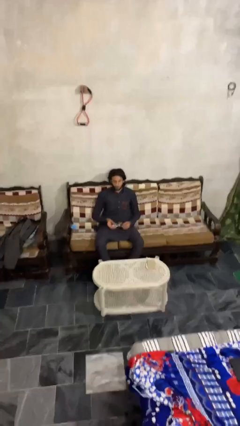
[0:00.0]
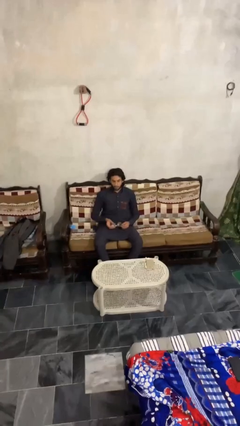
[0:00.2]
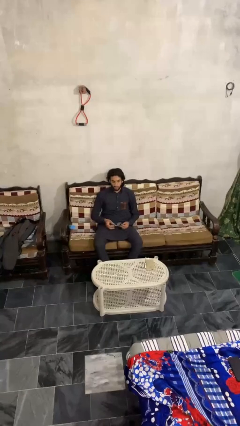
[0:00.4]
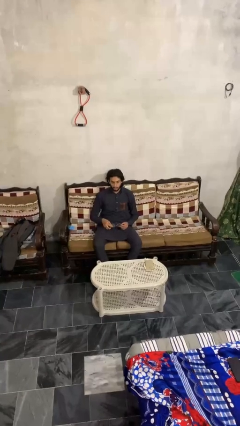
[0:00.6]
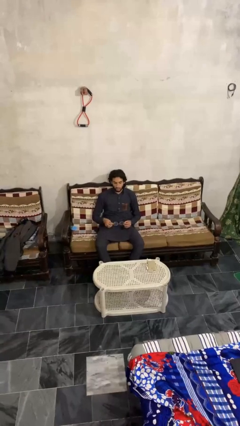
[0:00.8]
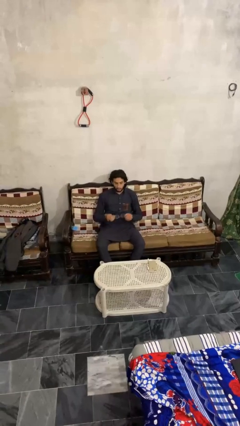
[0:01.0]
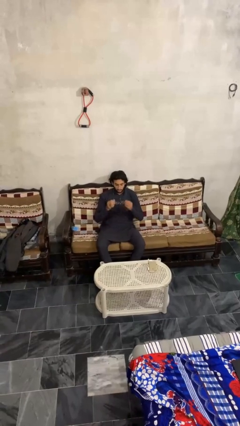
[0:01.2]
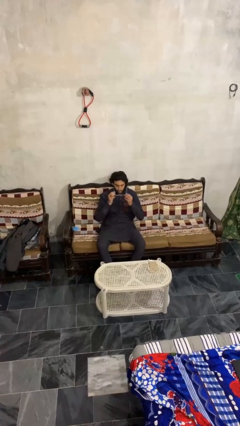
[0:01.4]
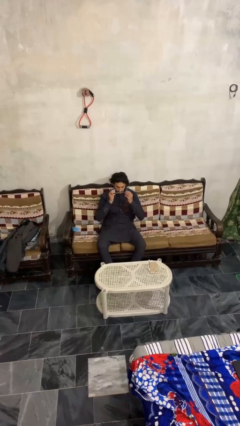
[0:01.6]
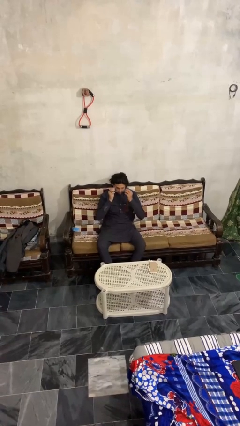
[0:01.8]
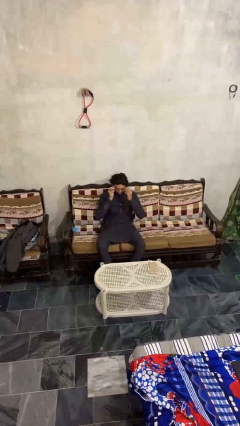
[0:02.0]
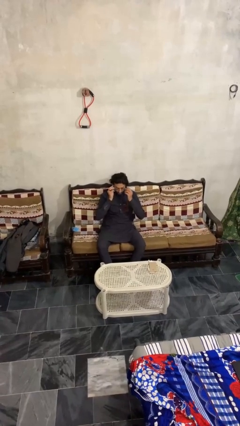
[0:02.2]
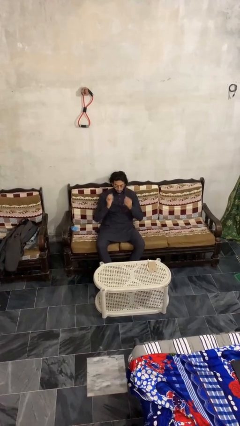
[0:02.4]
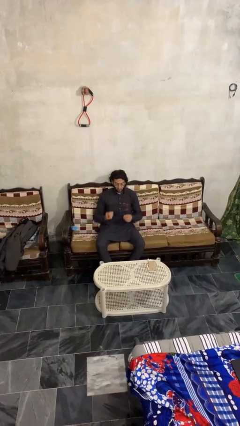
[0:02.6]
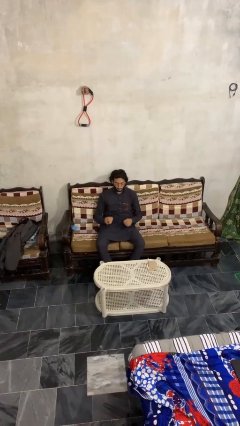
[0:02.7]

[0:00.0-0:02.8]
person puts on glasses

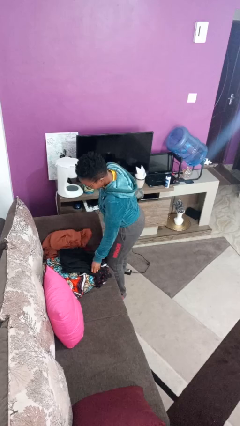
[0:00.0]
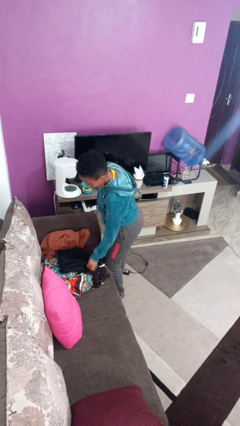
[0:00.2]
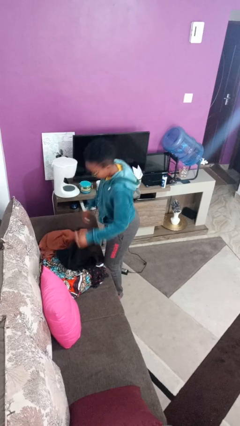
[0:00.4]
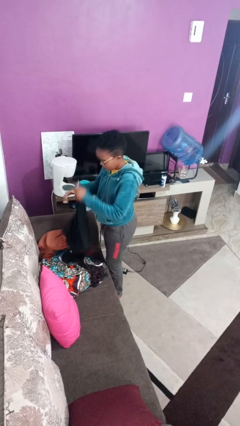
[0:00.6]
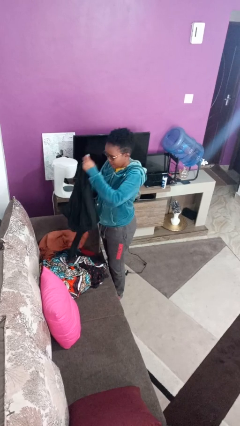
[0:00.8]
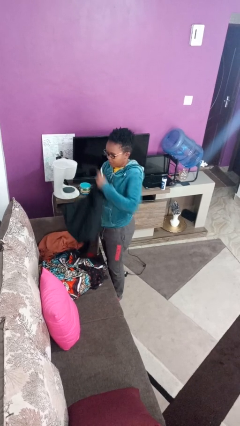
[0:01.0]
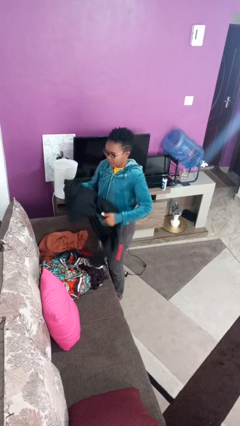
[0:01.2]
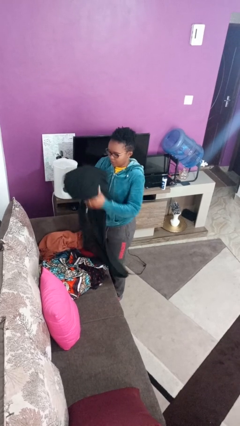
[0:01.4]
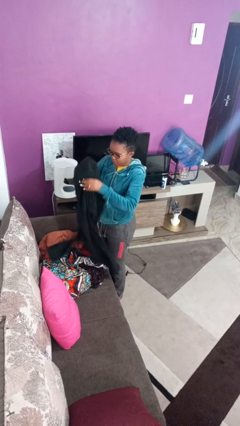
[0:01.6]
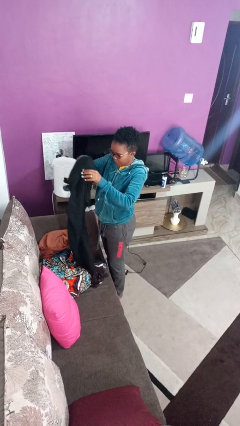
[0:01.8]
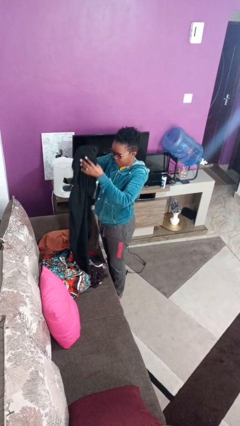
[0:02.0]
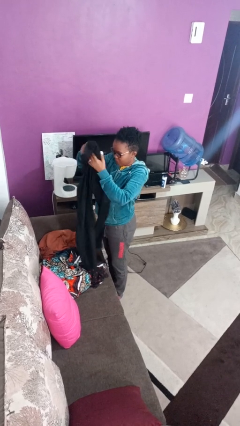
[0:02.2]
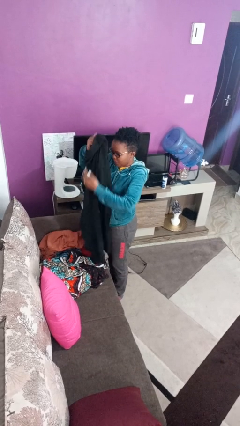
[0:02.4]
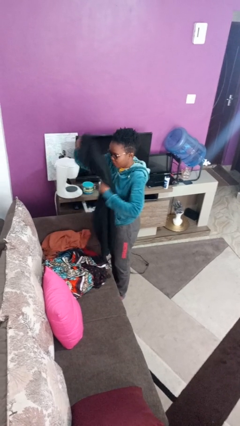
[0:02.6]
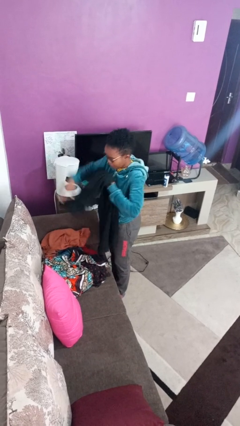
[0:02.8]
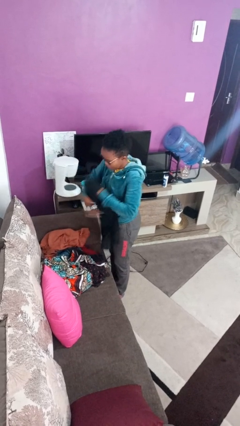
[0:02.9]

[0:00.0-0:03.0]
person folds pants

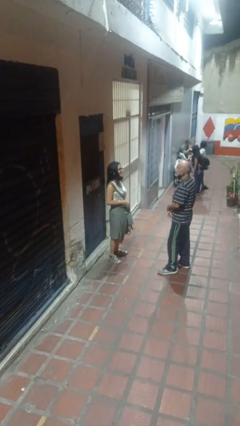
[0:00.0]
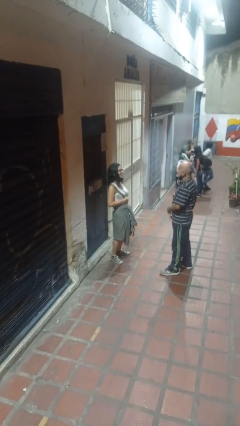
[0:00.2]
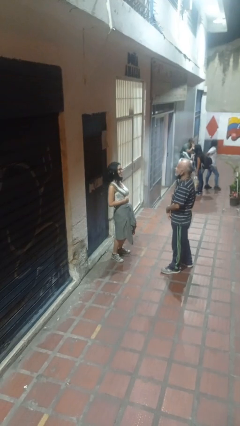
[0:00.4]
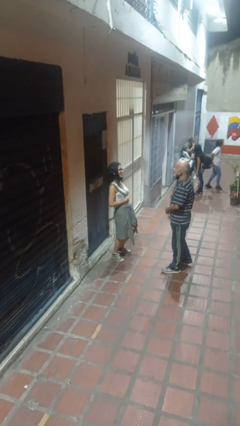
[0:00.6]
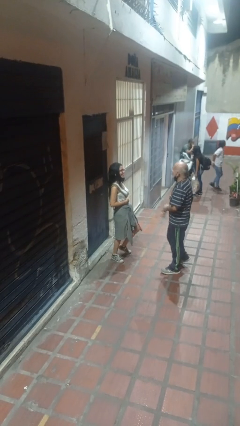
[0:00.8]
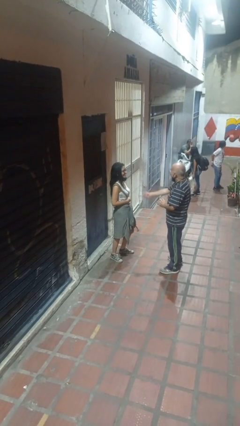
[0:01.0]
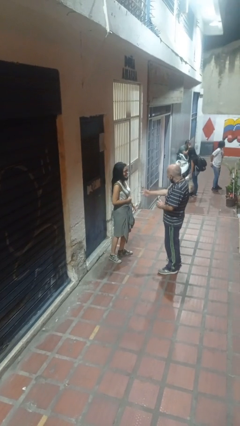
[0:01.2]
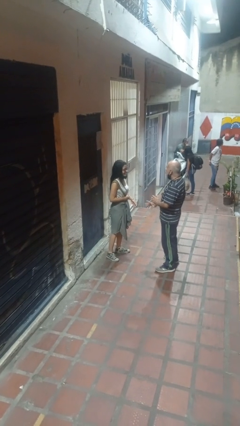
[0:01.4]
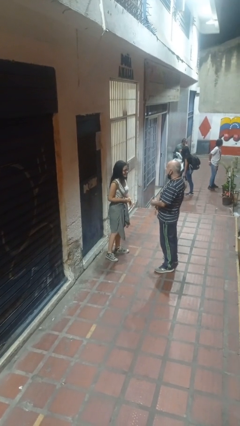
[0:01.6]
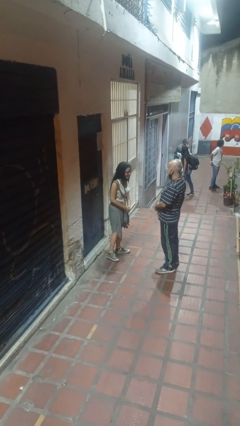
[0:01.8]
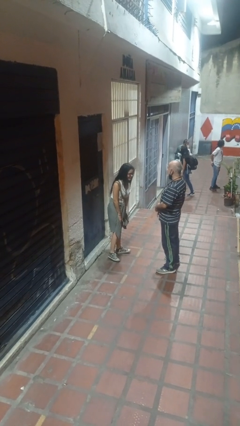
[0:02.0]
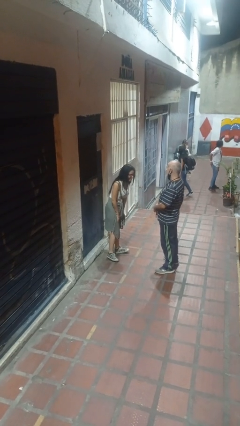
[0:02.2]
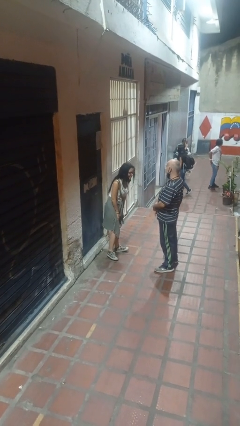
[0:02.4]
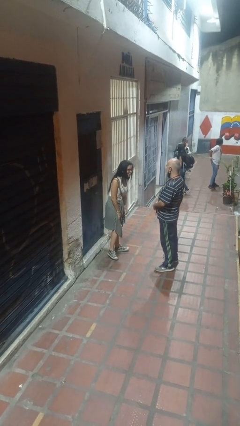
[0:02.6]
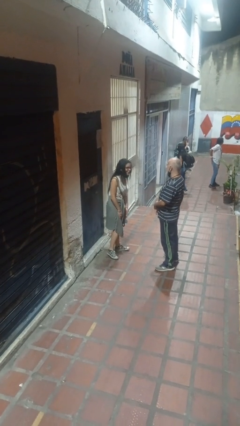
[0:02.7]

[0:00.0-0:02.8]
person laughs with person

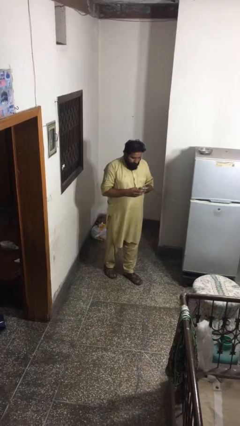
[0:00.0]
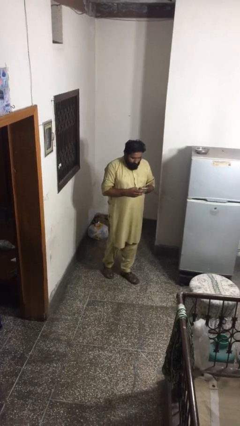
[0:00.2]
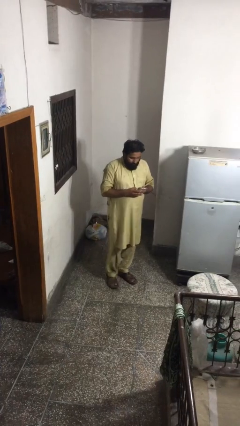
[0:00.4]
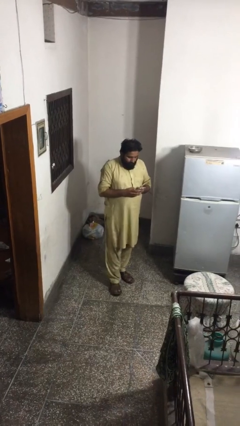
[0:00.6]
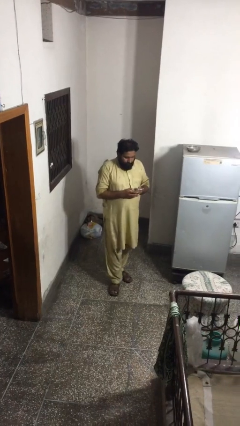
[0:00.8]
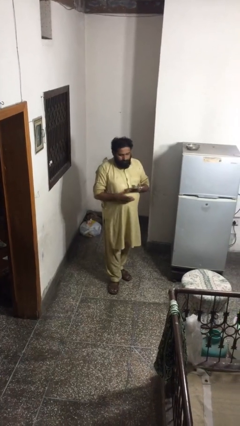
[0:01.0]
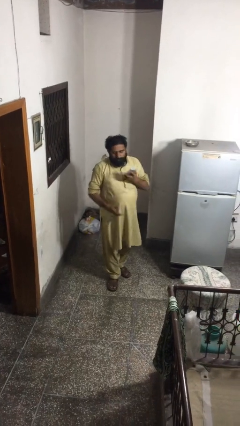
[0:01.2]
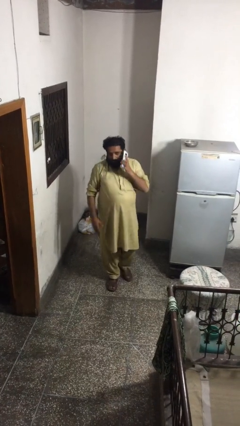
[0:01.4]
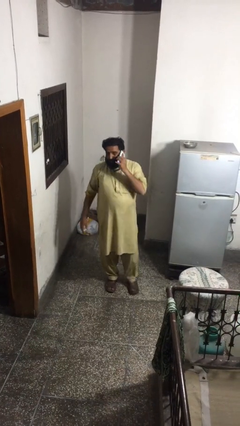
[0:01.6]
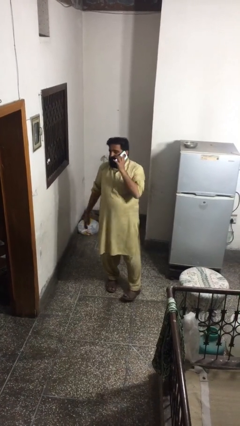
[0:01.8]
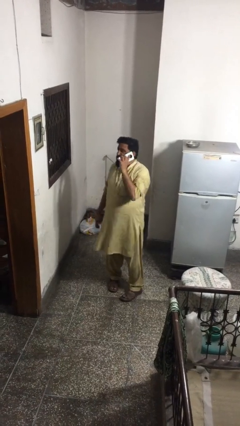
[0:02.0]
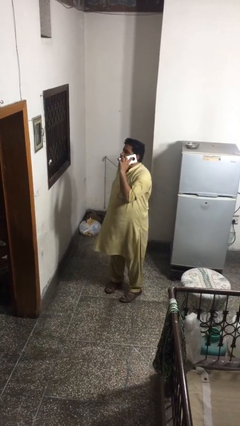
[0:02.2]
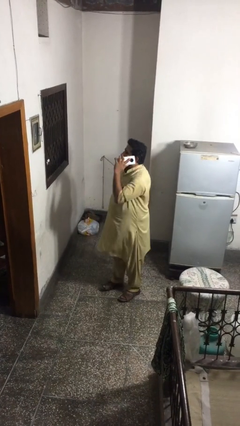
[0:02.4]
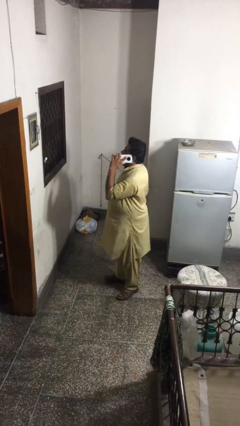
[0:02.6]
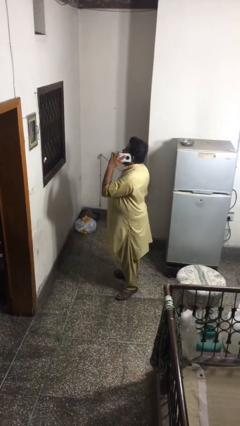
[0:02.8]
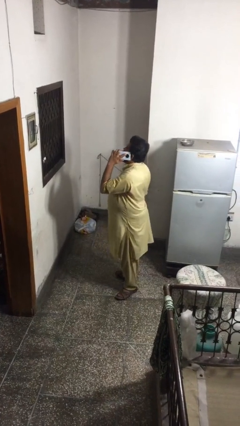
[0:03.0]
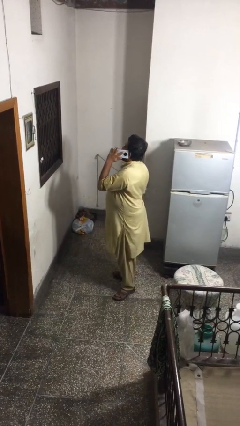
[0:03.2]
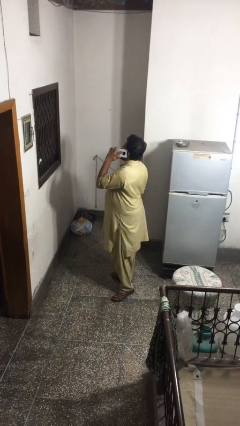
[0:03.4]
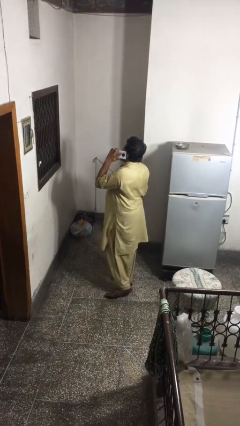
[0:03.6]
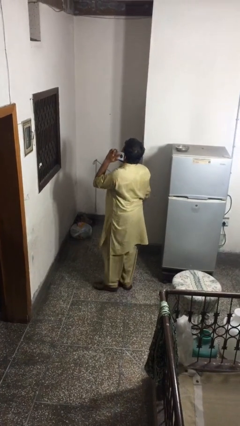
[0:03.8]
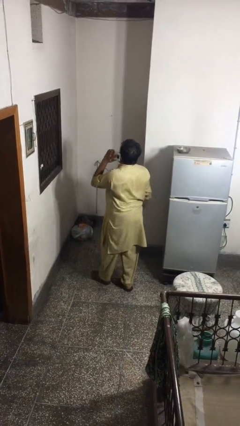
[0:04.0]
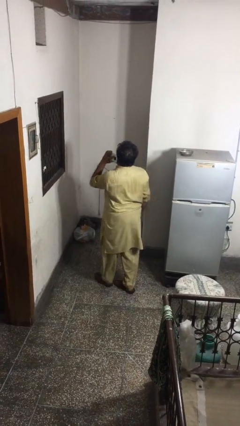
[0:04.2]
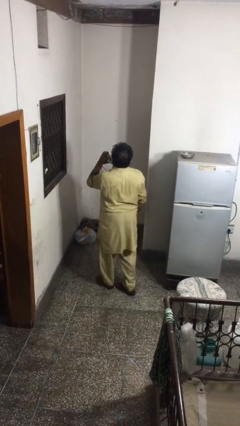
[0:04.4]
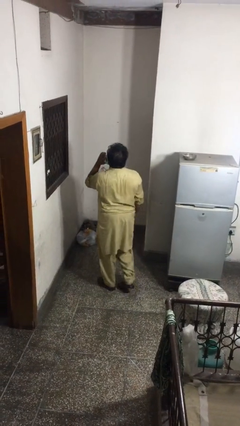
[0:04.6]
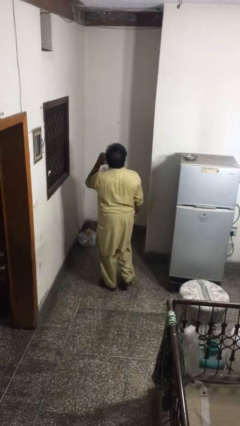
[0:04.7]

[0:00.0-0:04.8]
person talks on phone

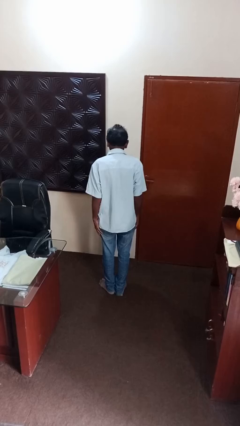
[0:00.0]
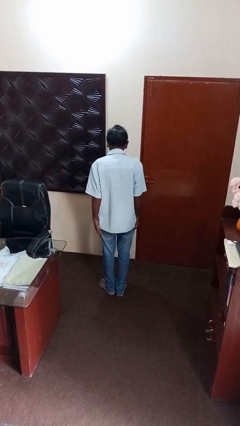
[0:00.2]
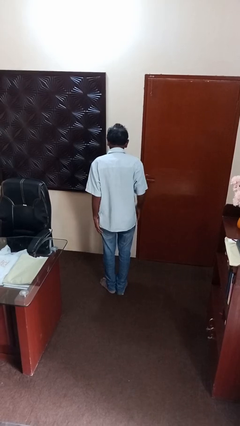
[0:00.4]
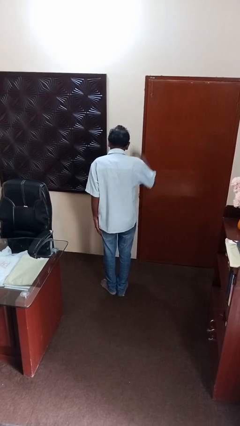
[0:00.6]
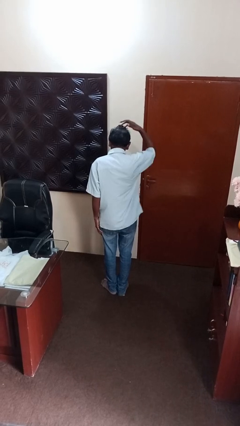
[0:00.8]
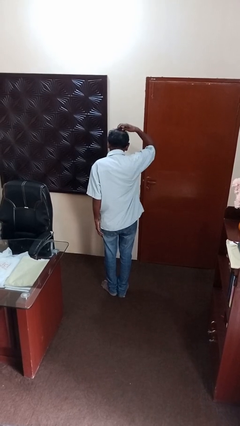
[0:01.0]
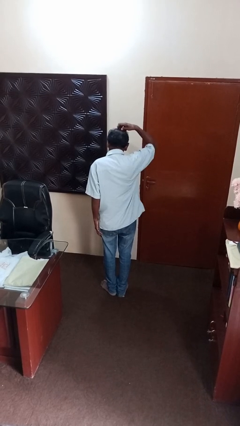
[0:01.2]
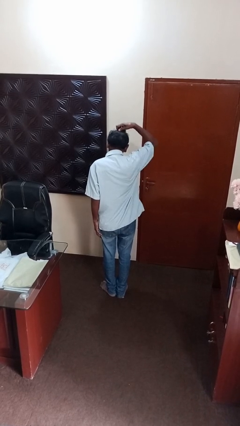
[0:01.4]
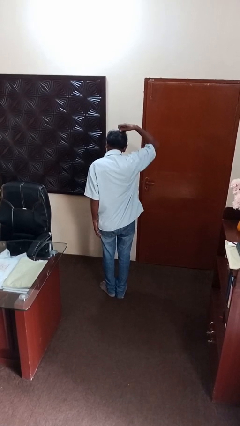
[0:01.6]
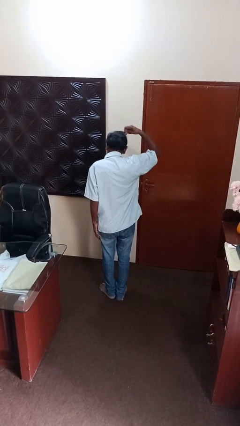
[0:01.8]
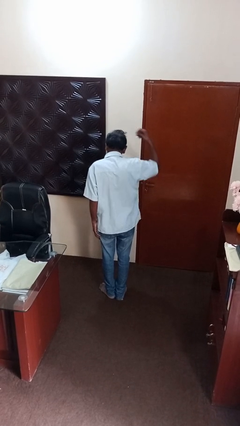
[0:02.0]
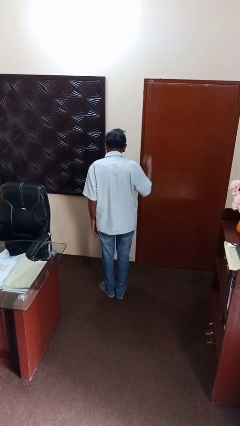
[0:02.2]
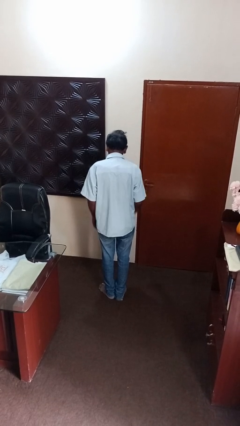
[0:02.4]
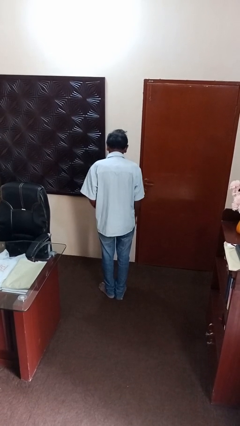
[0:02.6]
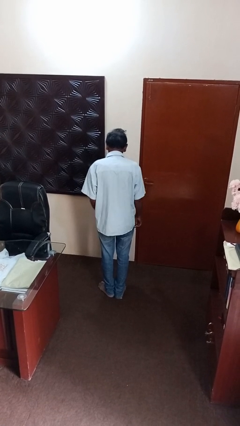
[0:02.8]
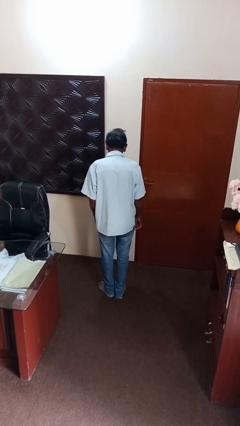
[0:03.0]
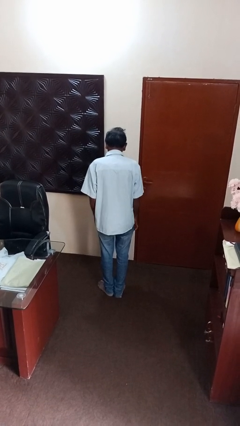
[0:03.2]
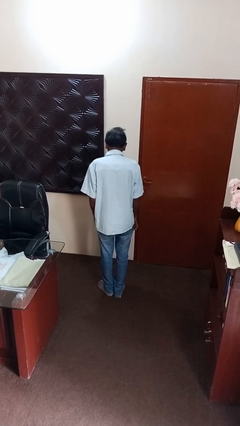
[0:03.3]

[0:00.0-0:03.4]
person takes off hairtie

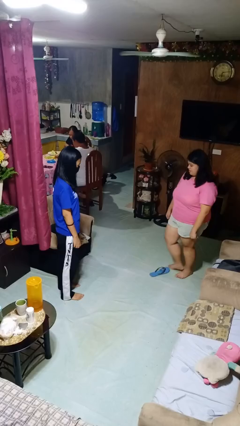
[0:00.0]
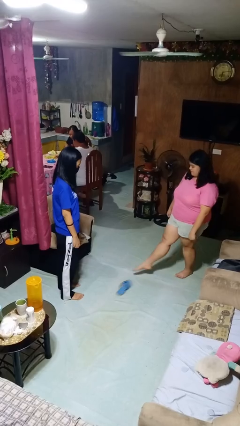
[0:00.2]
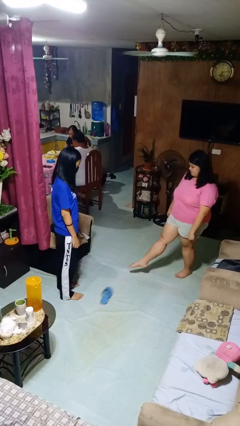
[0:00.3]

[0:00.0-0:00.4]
person kicks object to person

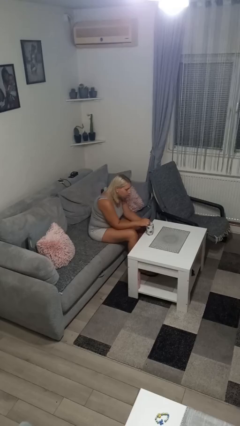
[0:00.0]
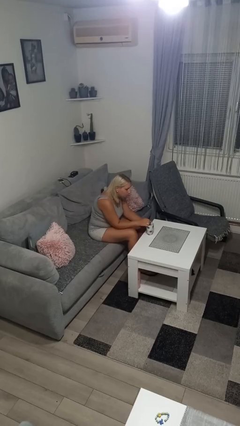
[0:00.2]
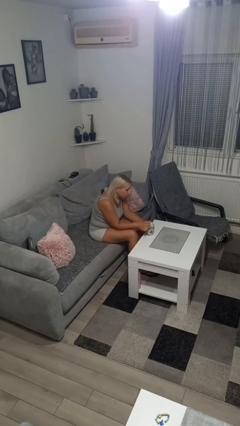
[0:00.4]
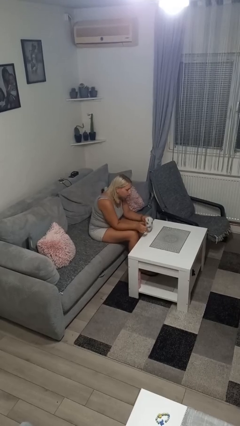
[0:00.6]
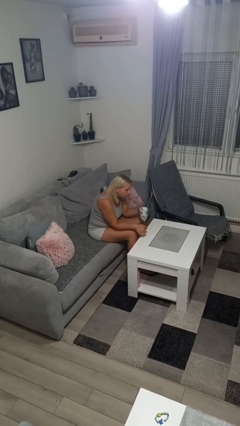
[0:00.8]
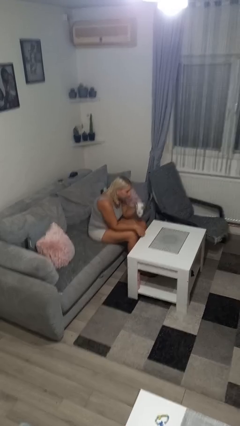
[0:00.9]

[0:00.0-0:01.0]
person stirs mug
